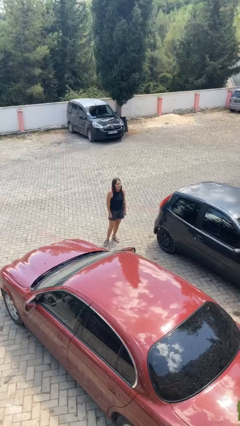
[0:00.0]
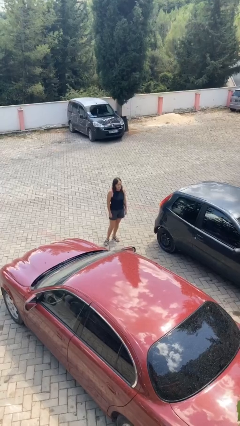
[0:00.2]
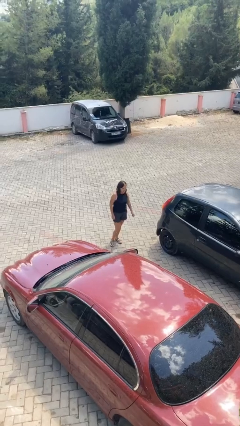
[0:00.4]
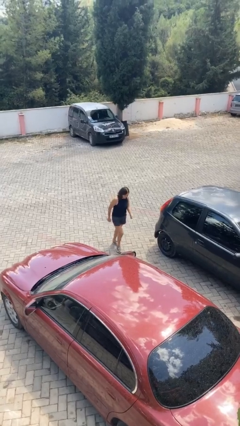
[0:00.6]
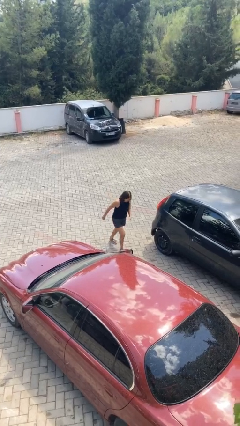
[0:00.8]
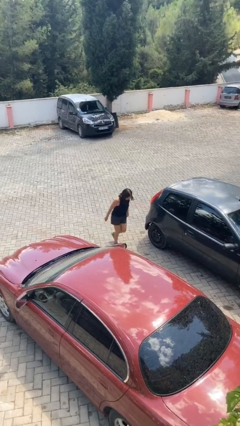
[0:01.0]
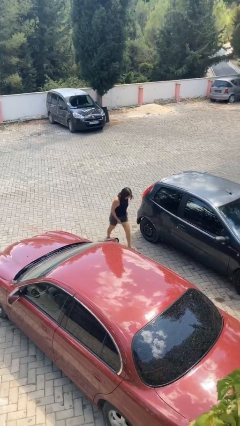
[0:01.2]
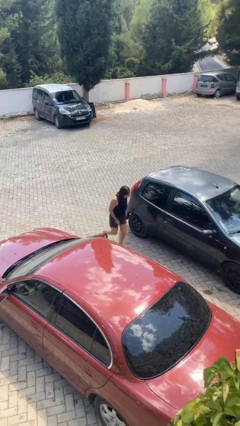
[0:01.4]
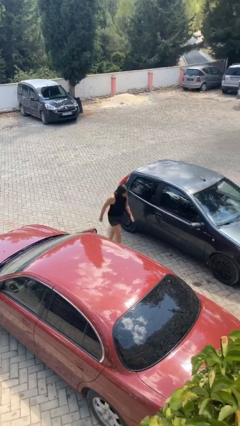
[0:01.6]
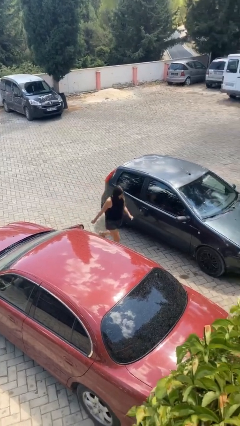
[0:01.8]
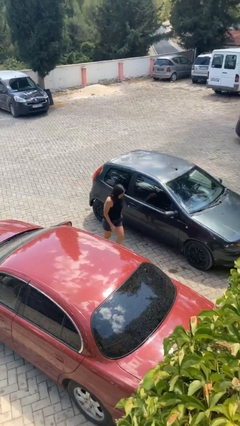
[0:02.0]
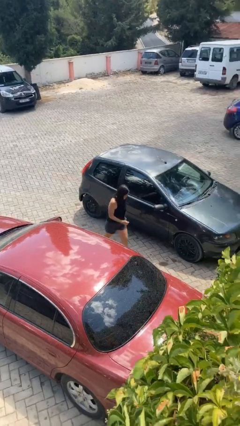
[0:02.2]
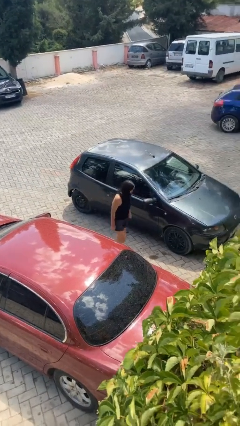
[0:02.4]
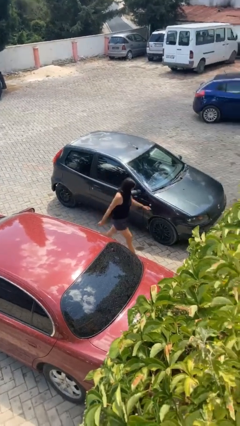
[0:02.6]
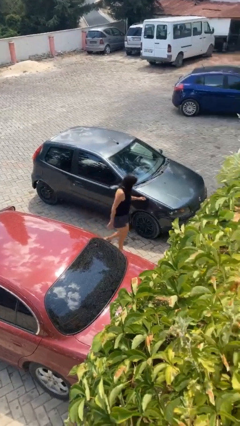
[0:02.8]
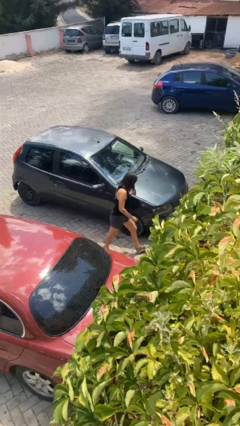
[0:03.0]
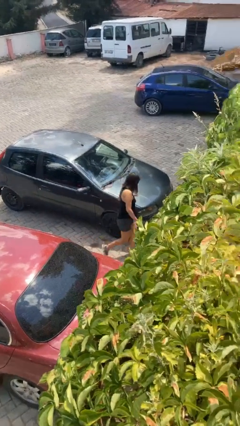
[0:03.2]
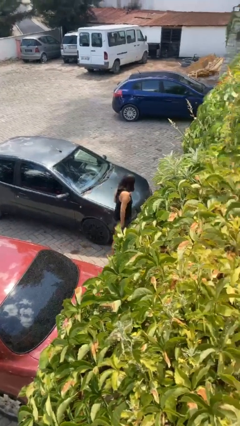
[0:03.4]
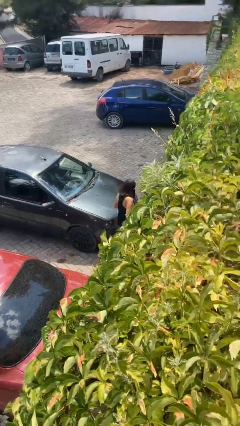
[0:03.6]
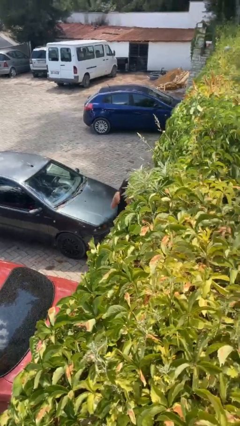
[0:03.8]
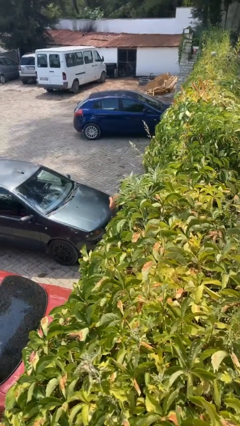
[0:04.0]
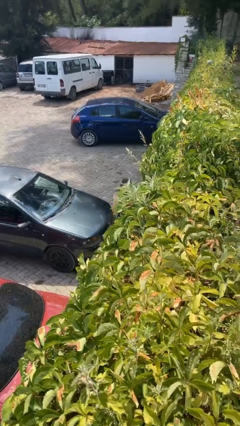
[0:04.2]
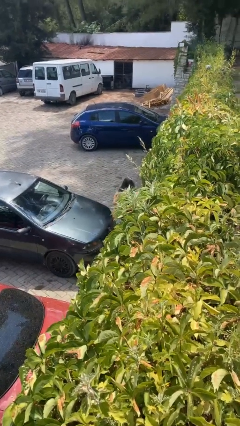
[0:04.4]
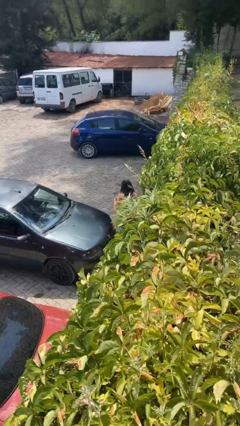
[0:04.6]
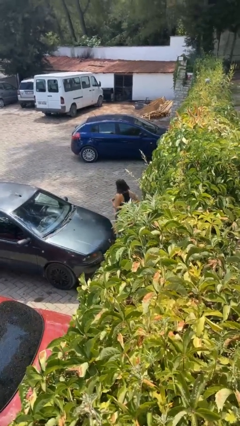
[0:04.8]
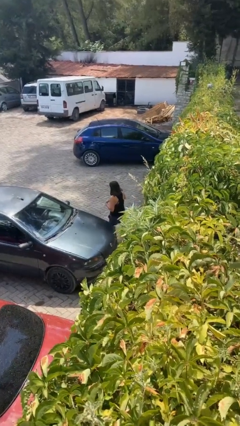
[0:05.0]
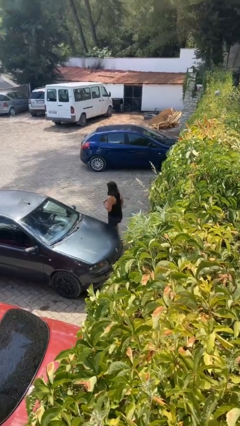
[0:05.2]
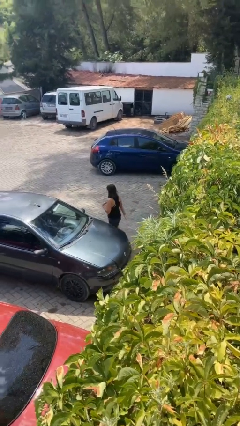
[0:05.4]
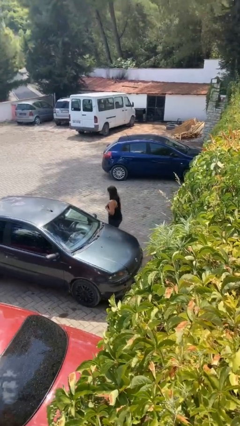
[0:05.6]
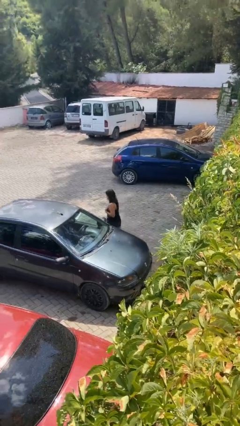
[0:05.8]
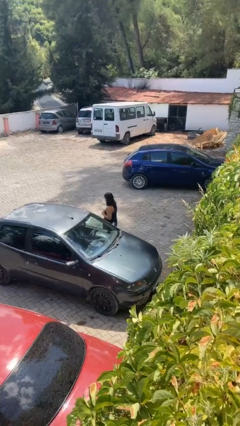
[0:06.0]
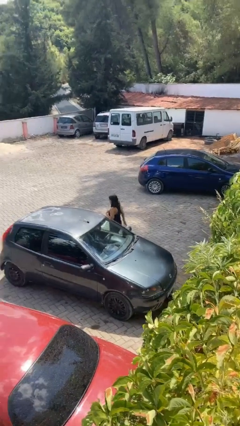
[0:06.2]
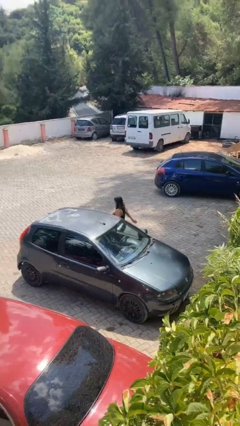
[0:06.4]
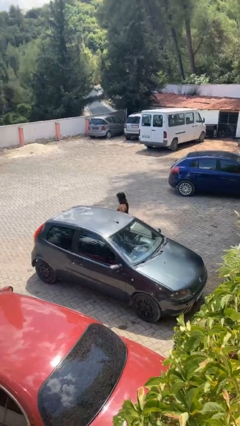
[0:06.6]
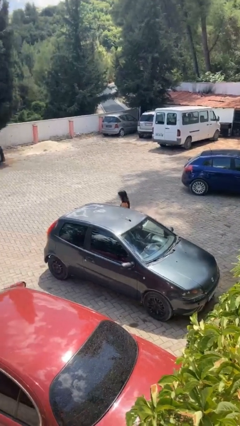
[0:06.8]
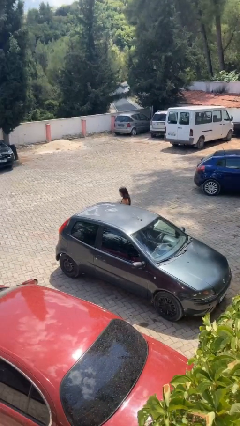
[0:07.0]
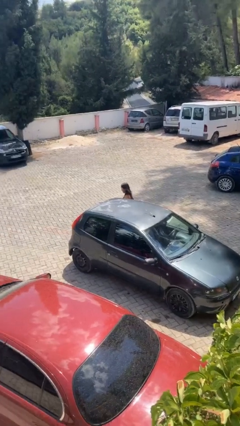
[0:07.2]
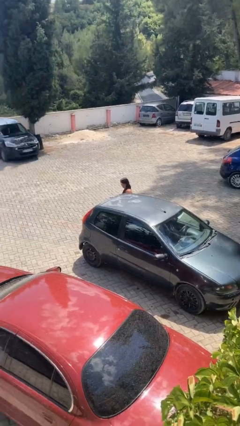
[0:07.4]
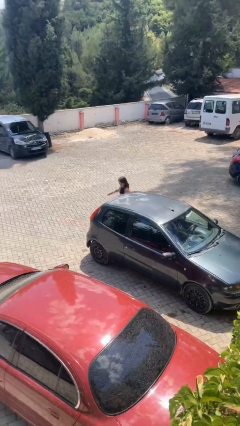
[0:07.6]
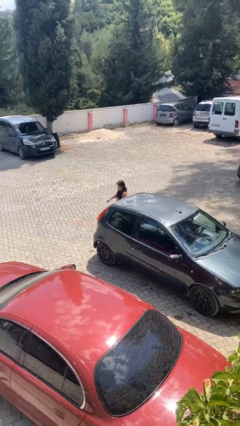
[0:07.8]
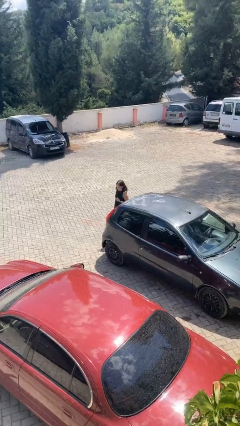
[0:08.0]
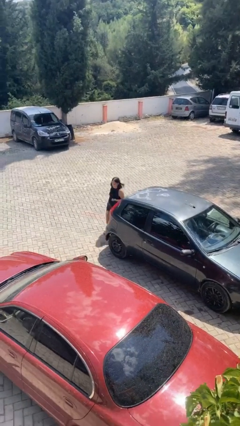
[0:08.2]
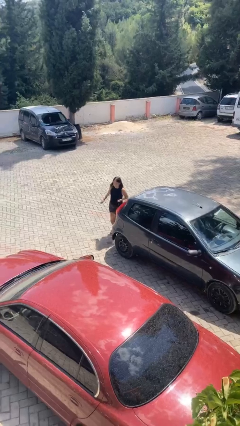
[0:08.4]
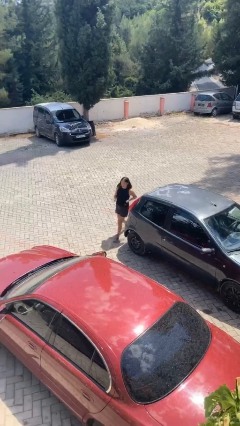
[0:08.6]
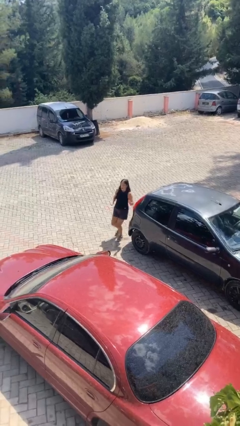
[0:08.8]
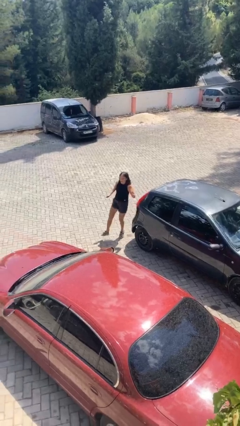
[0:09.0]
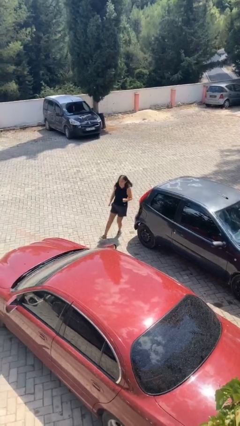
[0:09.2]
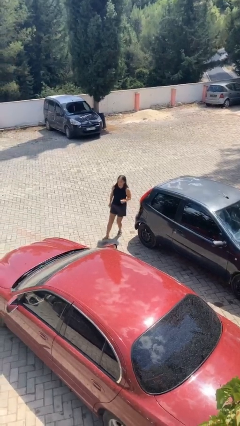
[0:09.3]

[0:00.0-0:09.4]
person walks around car

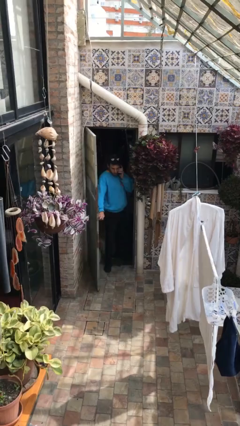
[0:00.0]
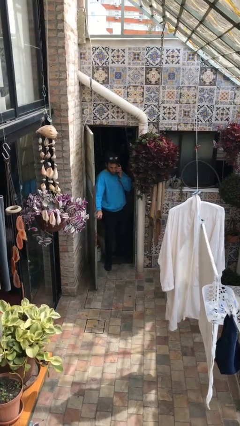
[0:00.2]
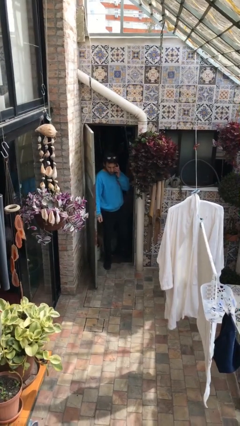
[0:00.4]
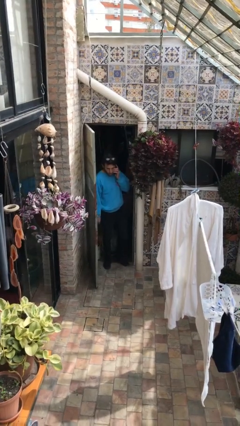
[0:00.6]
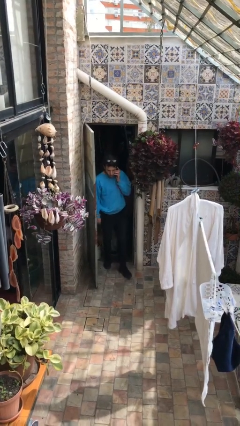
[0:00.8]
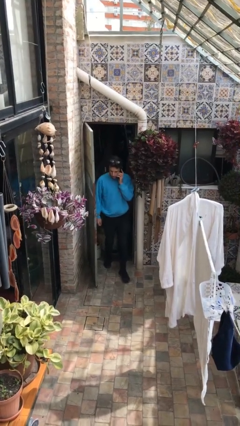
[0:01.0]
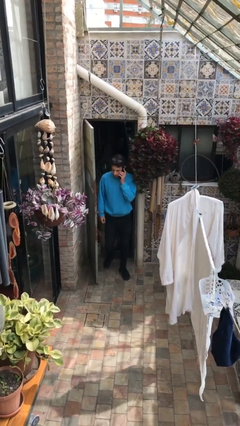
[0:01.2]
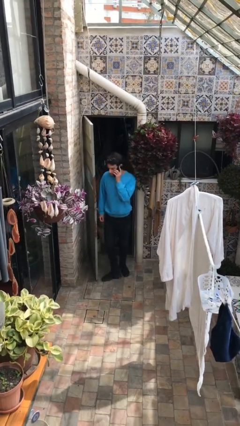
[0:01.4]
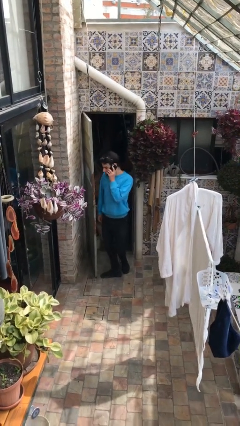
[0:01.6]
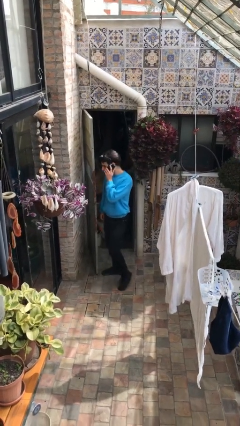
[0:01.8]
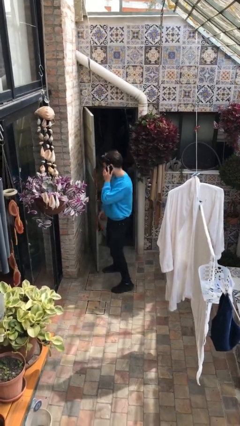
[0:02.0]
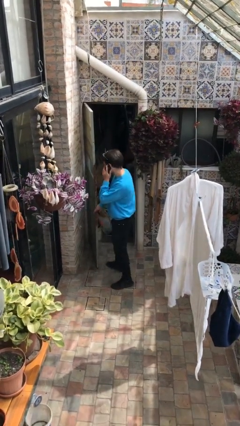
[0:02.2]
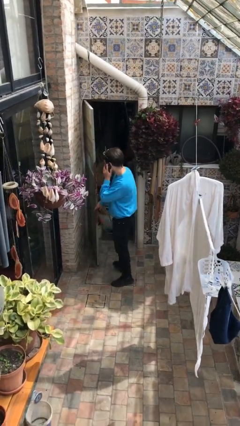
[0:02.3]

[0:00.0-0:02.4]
person enters scene through structure

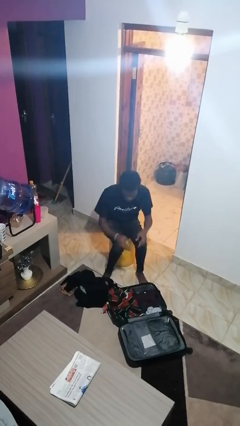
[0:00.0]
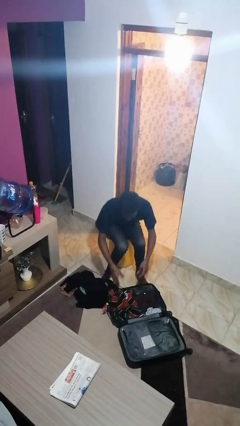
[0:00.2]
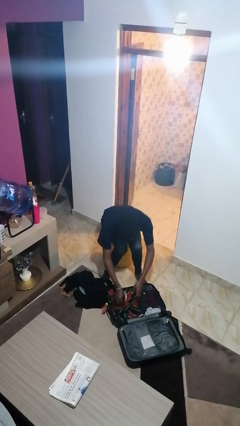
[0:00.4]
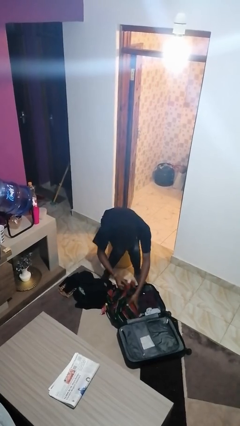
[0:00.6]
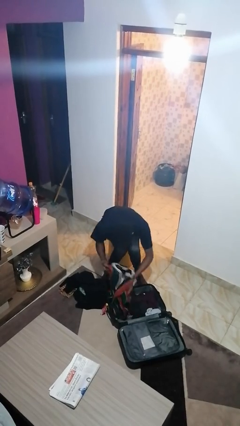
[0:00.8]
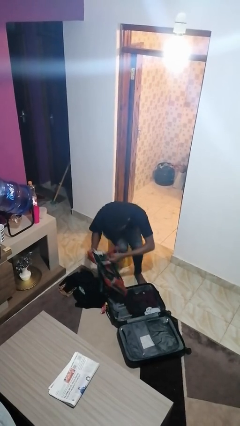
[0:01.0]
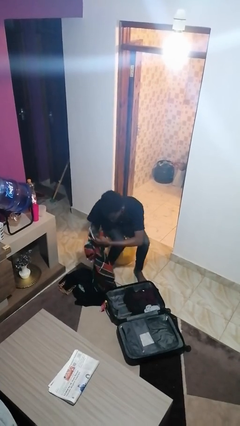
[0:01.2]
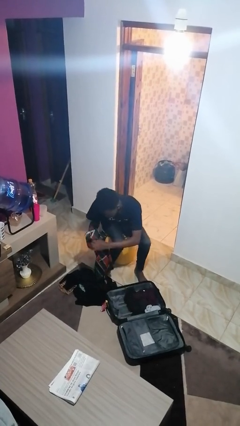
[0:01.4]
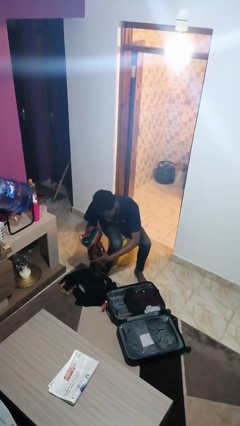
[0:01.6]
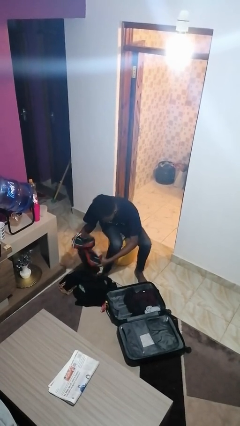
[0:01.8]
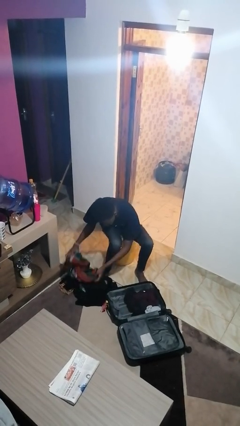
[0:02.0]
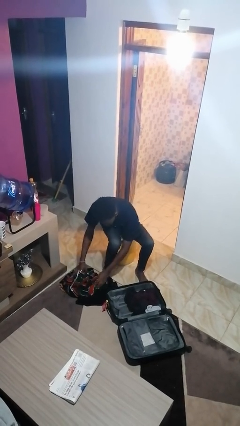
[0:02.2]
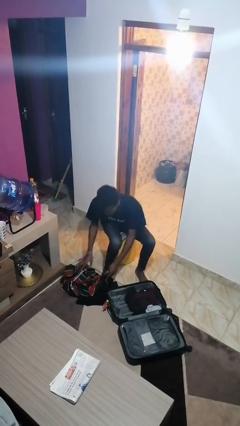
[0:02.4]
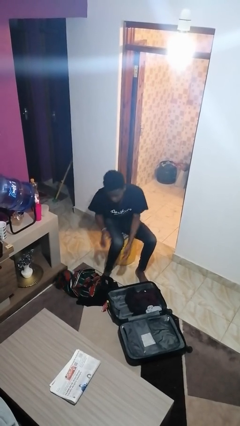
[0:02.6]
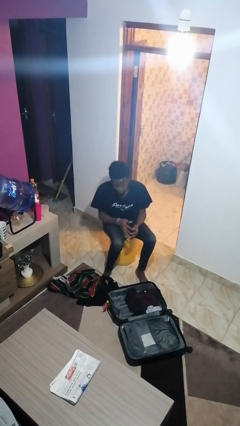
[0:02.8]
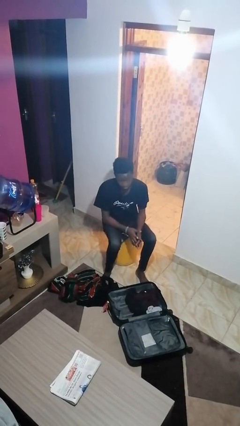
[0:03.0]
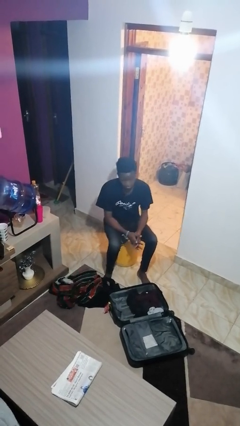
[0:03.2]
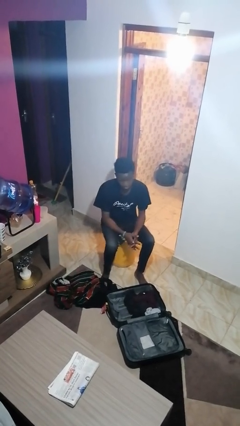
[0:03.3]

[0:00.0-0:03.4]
person unloads clothes from suitcase

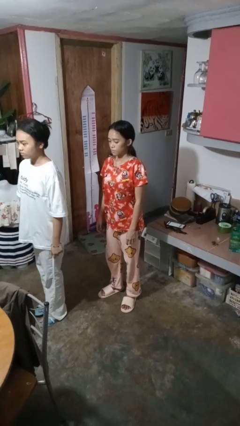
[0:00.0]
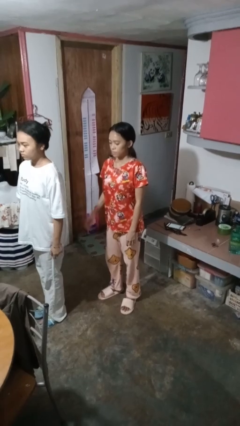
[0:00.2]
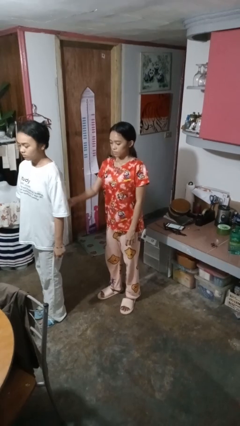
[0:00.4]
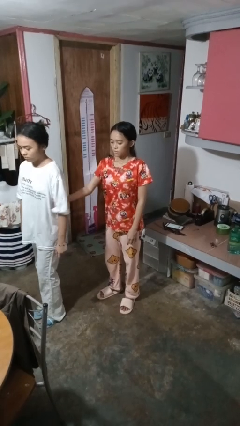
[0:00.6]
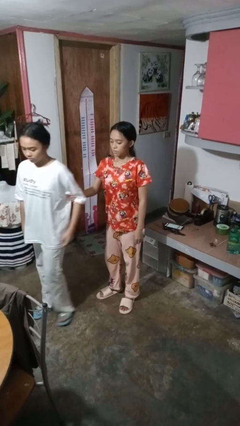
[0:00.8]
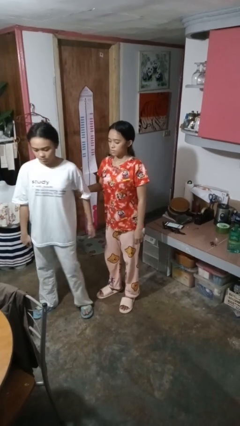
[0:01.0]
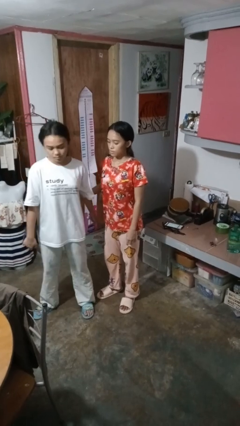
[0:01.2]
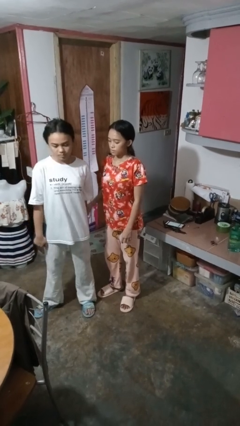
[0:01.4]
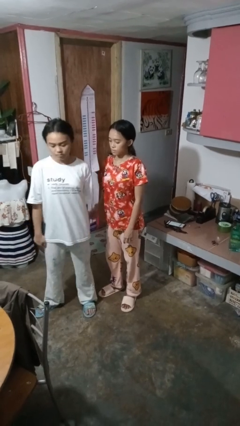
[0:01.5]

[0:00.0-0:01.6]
person grabs person by bicep

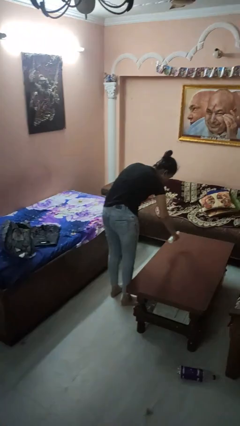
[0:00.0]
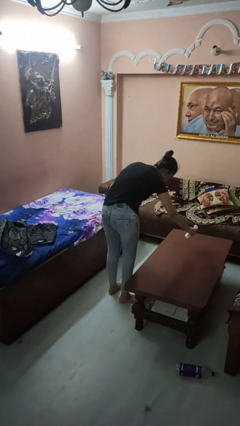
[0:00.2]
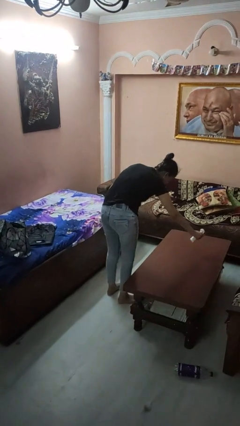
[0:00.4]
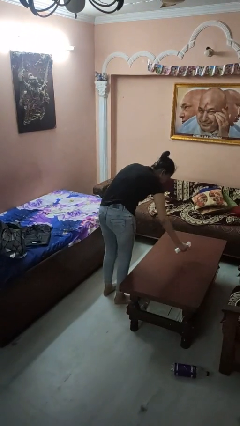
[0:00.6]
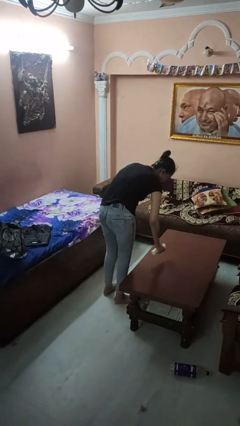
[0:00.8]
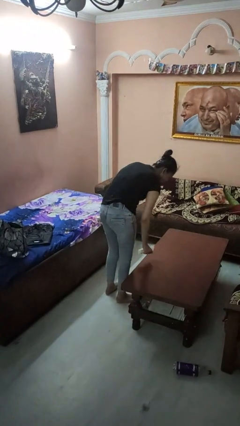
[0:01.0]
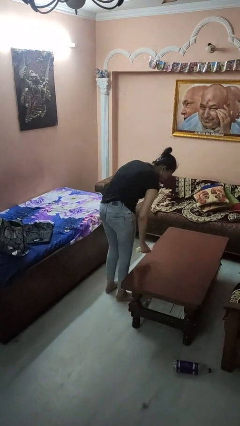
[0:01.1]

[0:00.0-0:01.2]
person sprays from bottle
